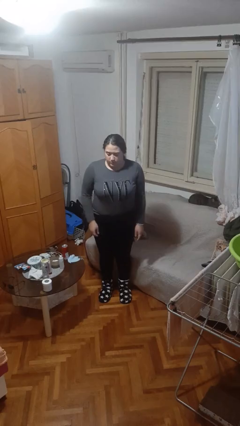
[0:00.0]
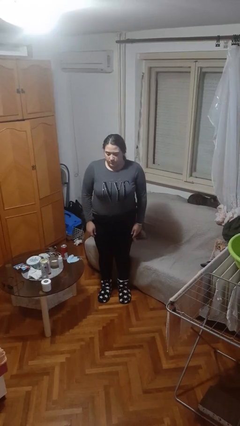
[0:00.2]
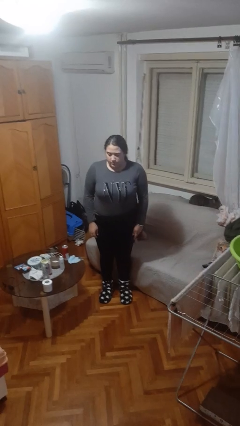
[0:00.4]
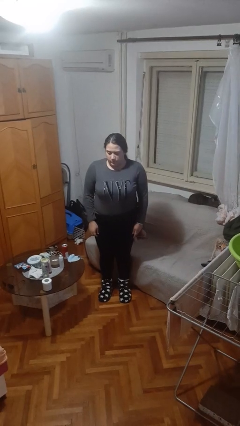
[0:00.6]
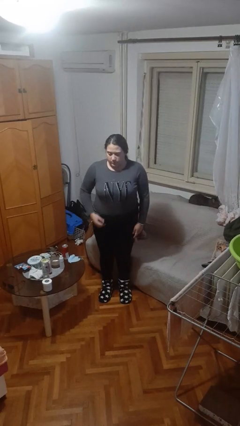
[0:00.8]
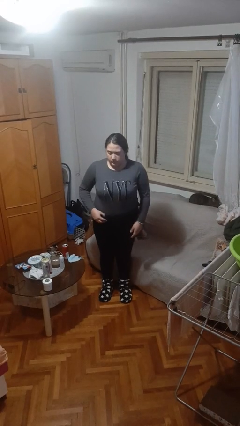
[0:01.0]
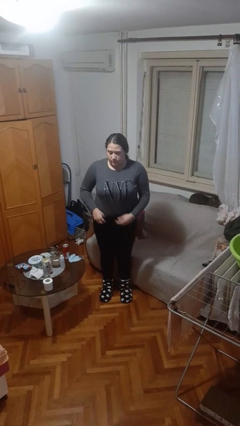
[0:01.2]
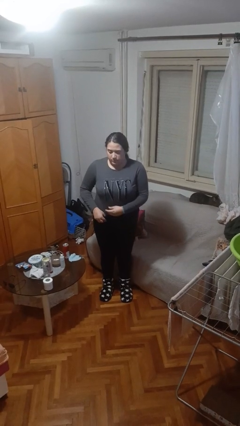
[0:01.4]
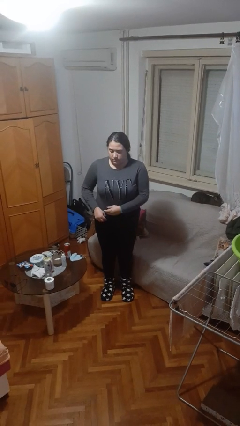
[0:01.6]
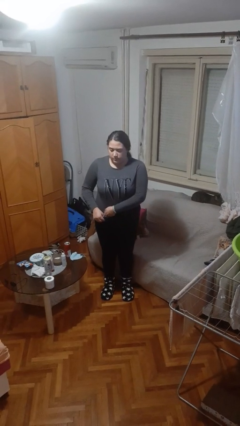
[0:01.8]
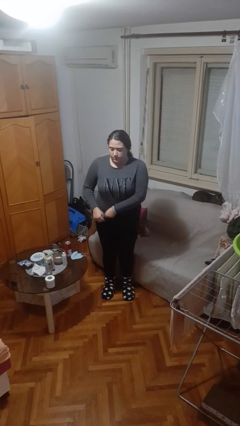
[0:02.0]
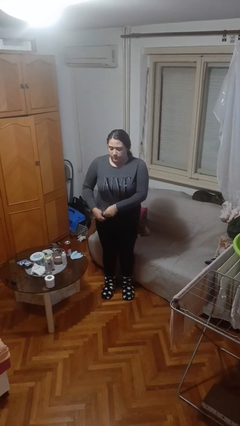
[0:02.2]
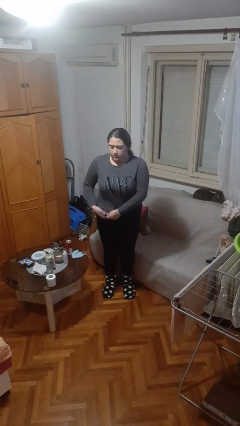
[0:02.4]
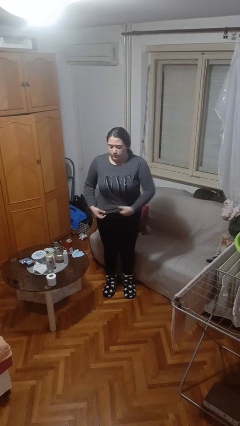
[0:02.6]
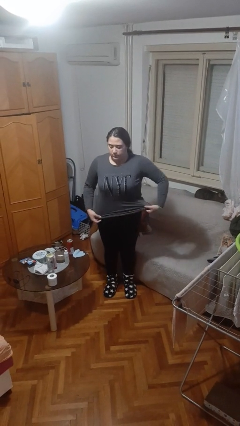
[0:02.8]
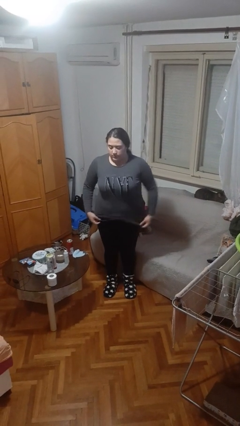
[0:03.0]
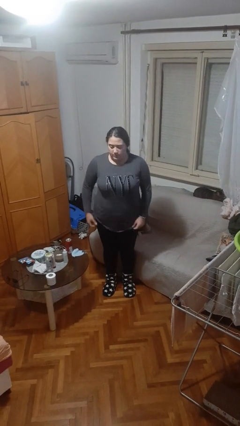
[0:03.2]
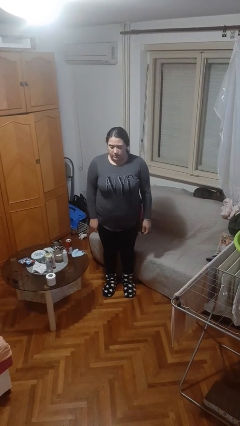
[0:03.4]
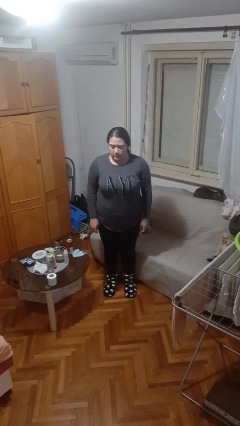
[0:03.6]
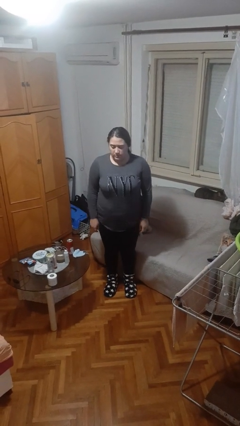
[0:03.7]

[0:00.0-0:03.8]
person untucks shirt

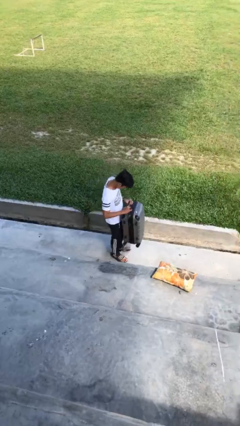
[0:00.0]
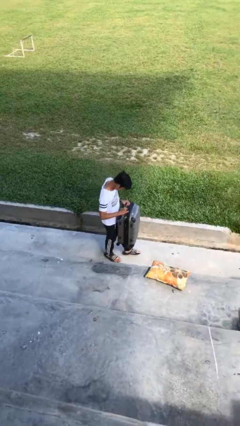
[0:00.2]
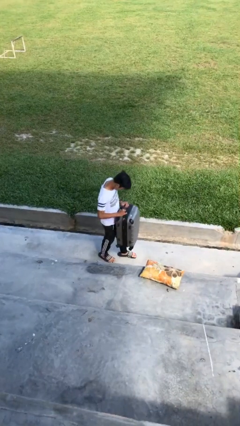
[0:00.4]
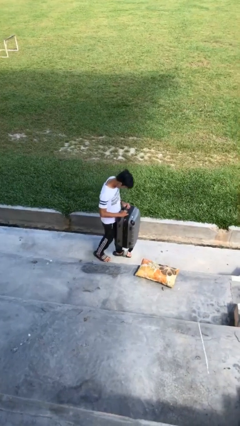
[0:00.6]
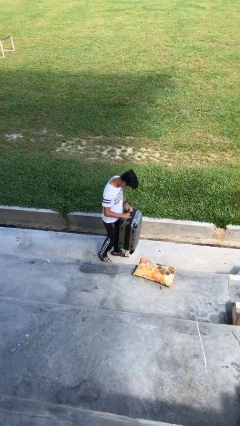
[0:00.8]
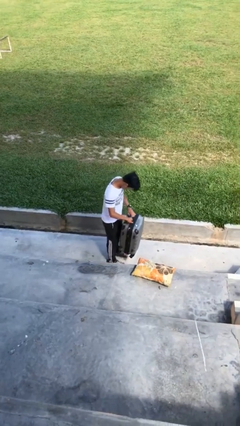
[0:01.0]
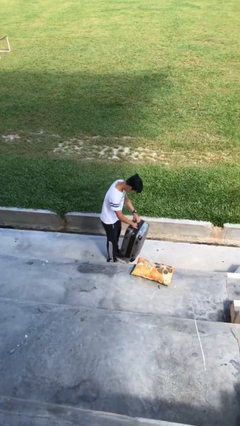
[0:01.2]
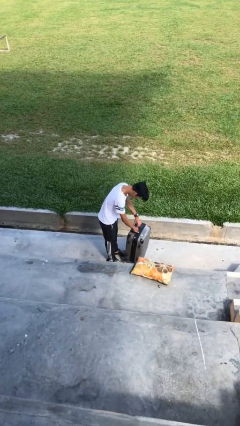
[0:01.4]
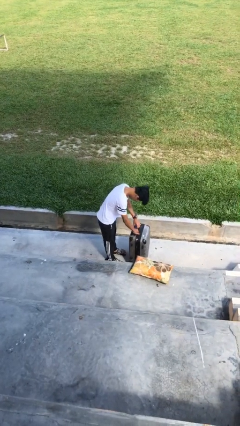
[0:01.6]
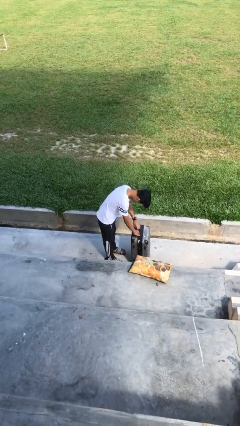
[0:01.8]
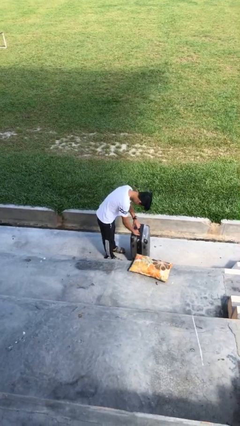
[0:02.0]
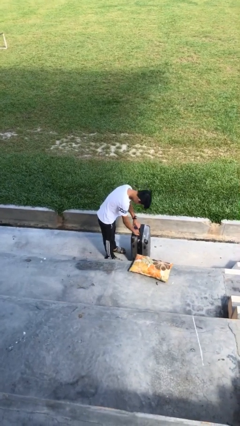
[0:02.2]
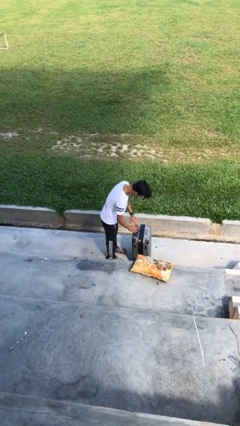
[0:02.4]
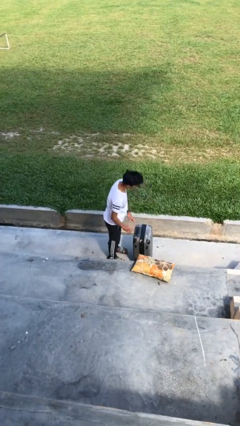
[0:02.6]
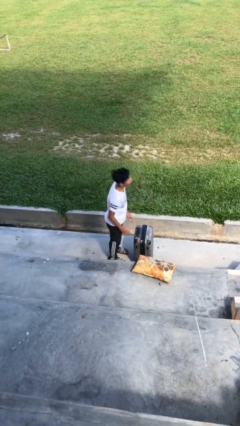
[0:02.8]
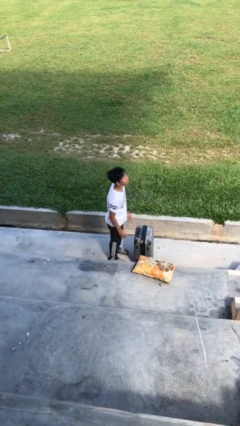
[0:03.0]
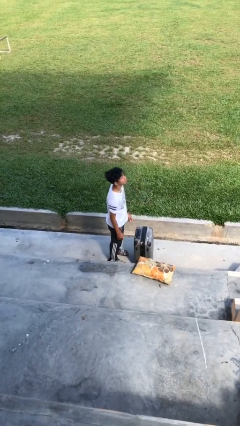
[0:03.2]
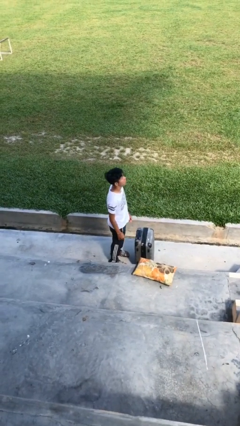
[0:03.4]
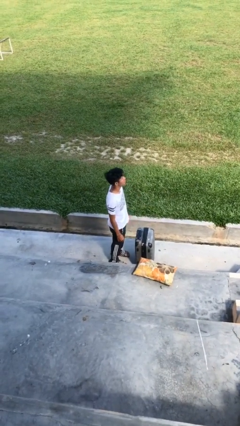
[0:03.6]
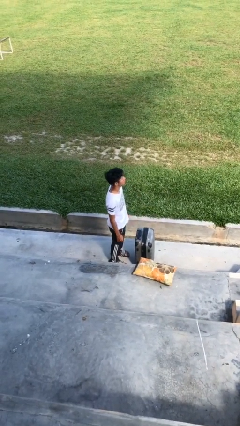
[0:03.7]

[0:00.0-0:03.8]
person puts down object on floor

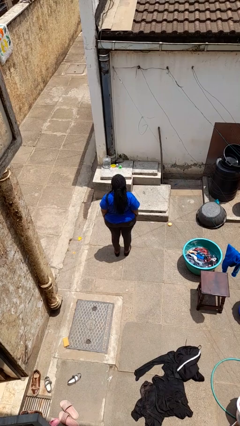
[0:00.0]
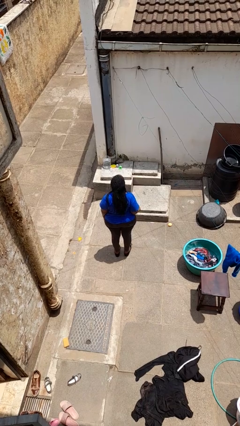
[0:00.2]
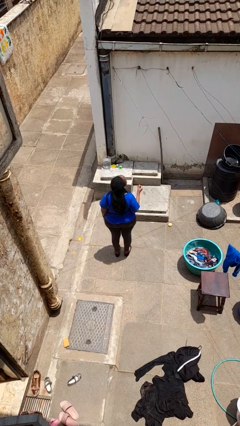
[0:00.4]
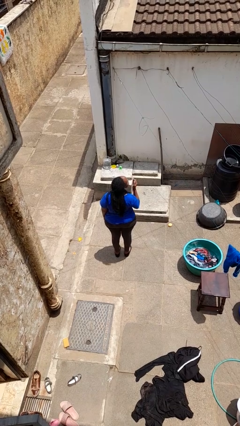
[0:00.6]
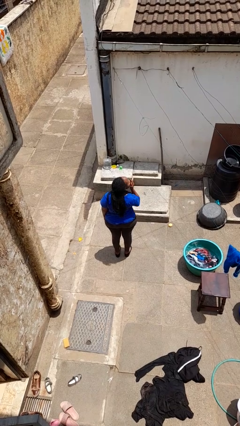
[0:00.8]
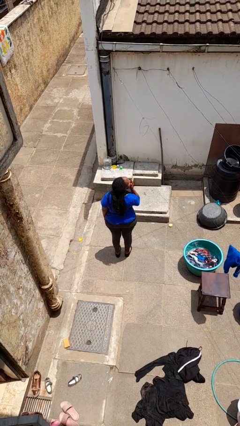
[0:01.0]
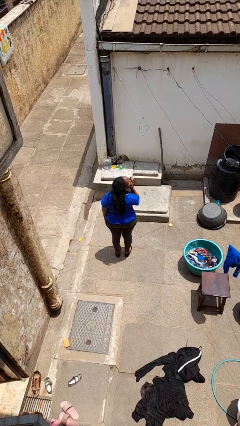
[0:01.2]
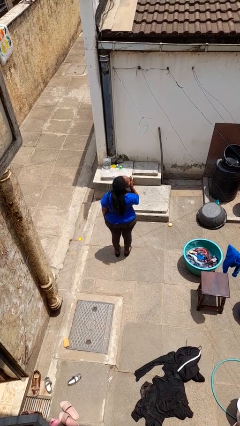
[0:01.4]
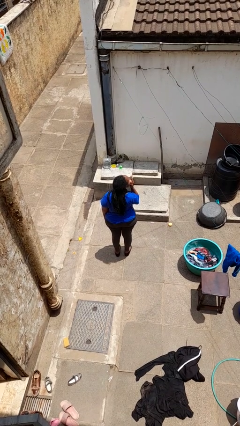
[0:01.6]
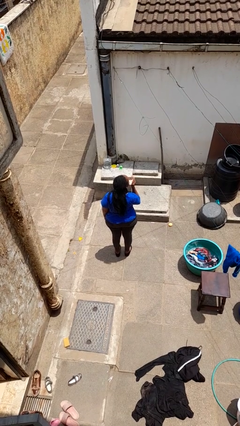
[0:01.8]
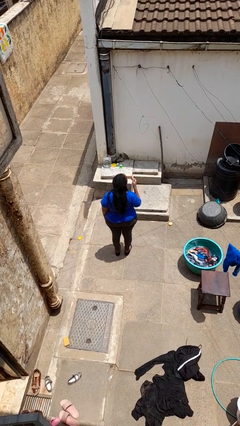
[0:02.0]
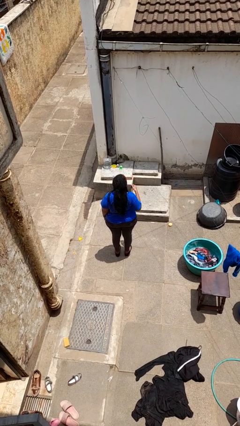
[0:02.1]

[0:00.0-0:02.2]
person yawns

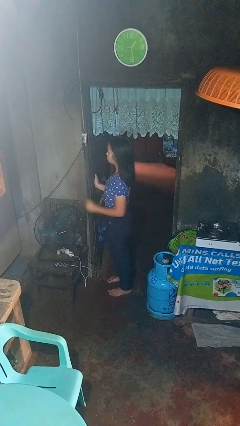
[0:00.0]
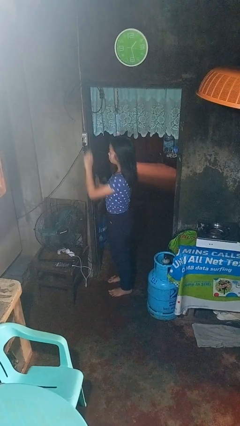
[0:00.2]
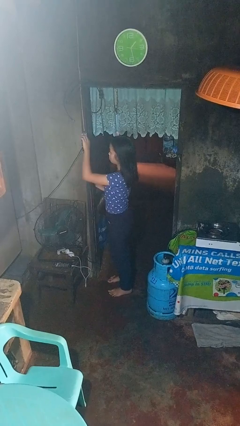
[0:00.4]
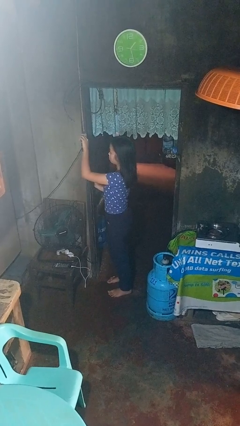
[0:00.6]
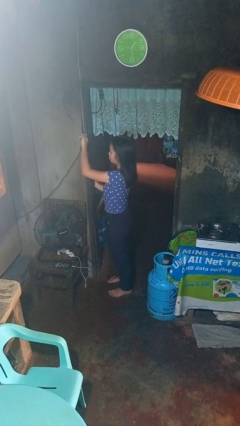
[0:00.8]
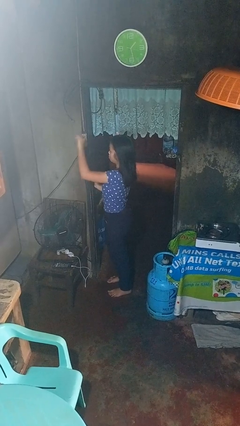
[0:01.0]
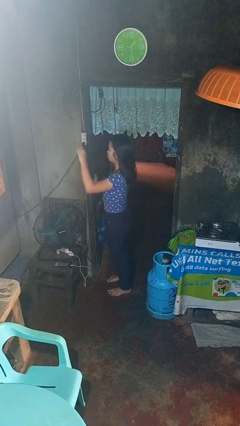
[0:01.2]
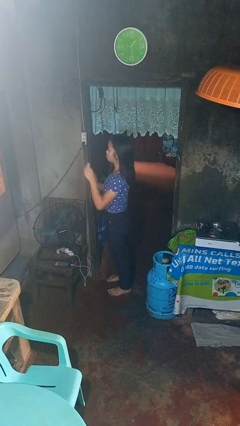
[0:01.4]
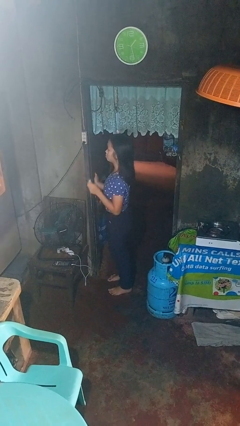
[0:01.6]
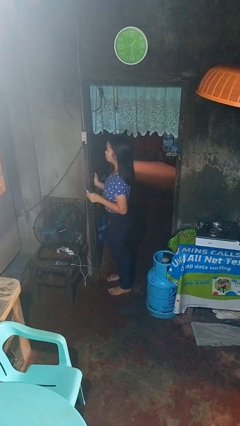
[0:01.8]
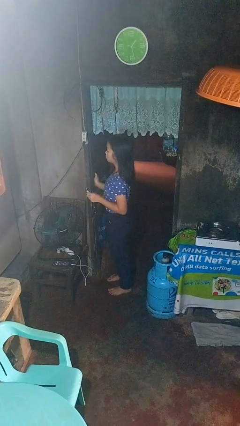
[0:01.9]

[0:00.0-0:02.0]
person unplugs from electrical socket

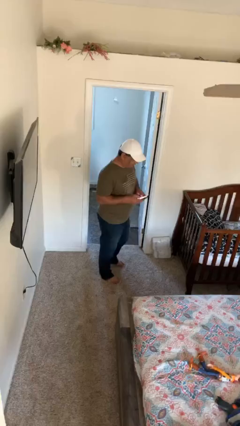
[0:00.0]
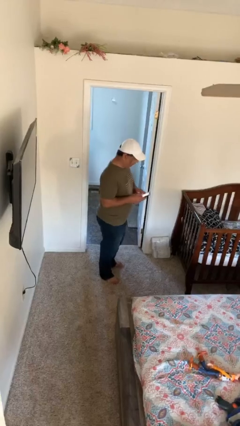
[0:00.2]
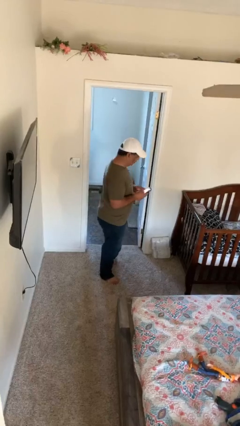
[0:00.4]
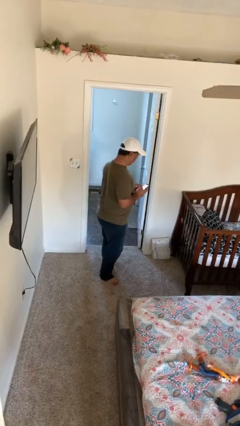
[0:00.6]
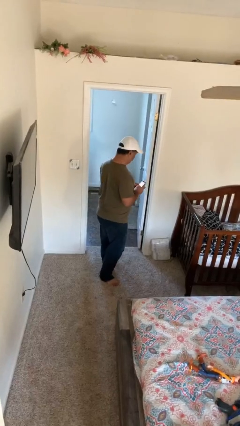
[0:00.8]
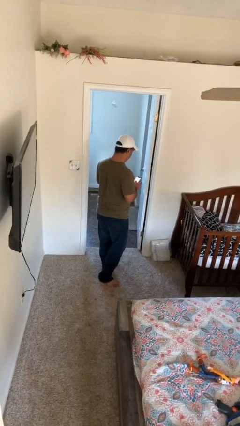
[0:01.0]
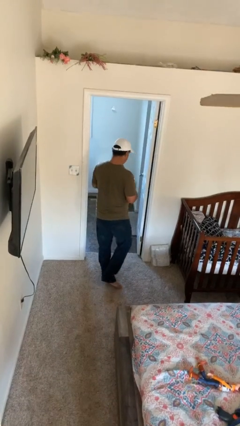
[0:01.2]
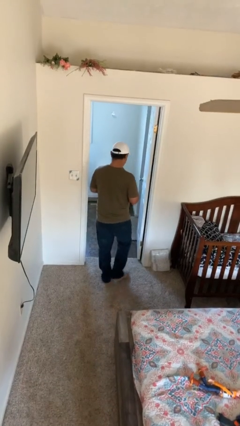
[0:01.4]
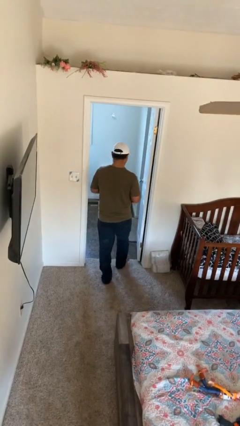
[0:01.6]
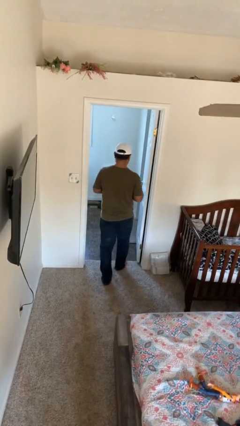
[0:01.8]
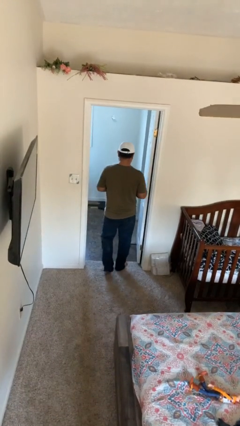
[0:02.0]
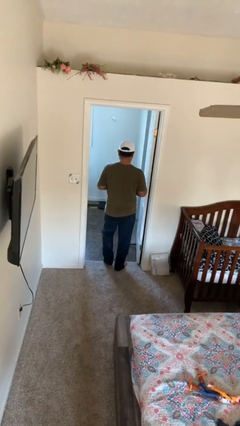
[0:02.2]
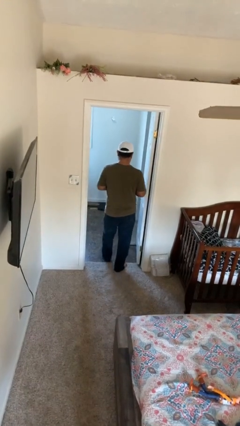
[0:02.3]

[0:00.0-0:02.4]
person exits scene through structure

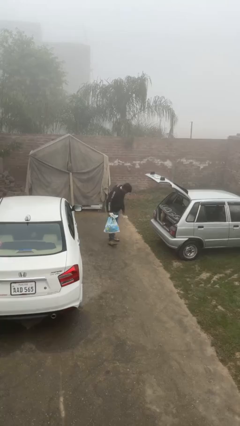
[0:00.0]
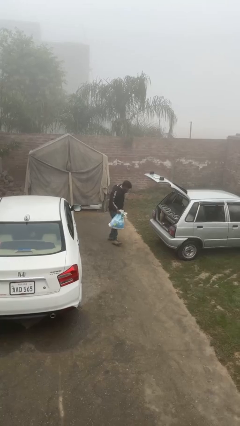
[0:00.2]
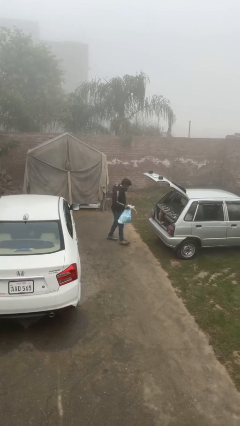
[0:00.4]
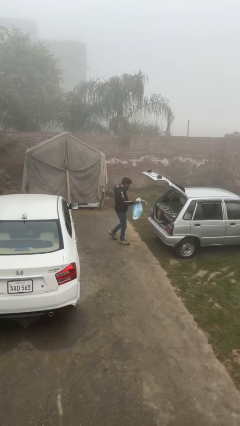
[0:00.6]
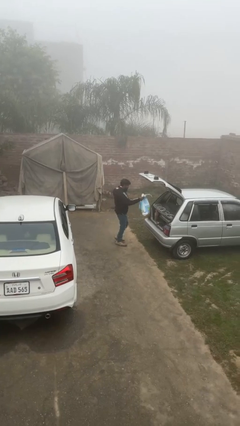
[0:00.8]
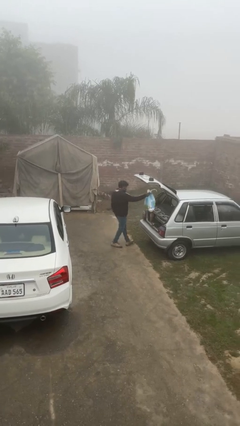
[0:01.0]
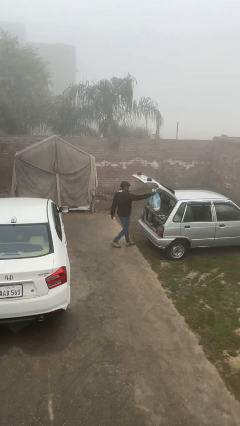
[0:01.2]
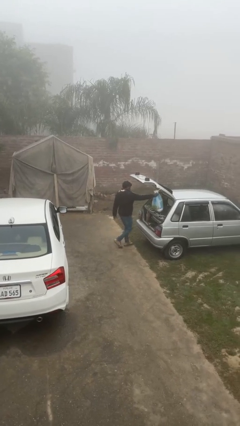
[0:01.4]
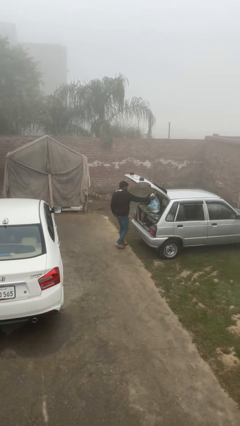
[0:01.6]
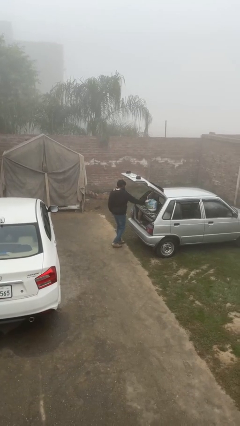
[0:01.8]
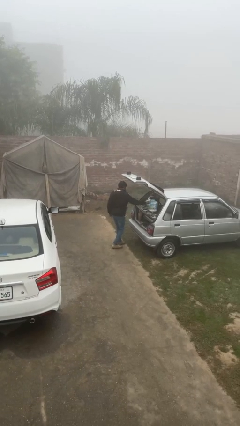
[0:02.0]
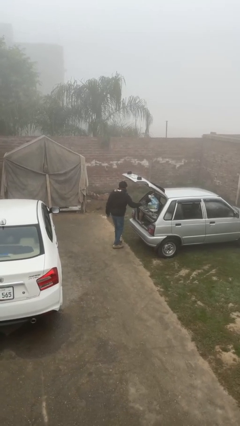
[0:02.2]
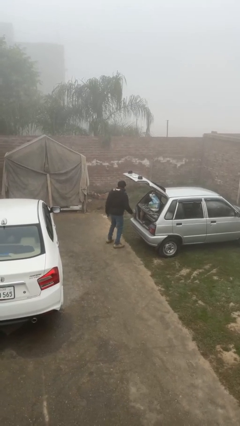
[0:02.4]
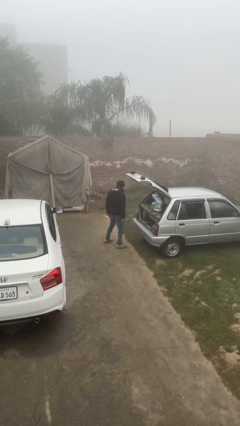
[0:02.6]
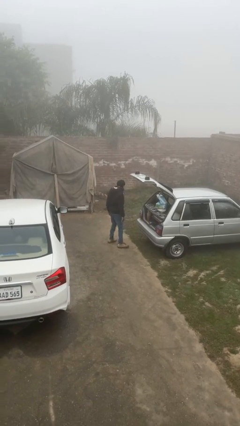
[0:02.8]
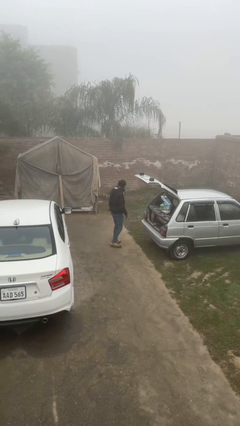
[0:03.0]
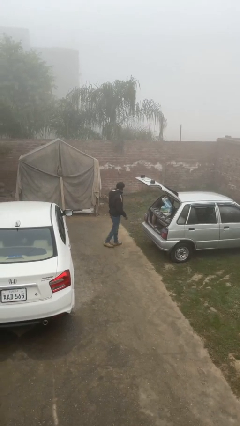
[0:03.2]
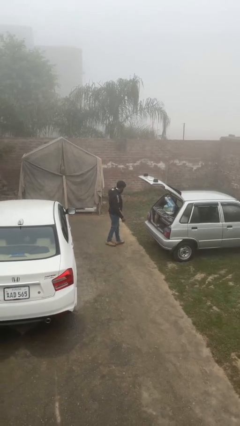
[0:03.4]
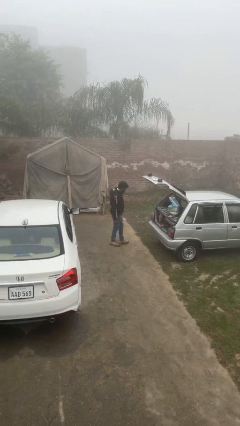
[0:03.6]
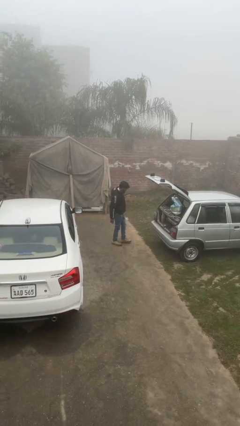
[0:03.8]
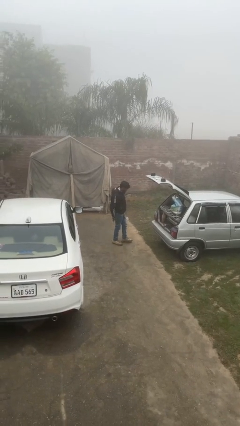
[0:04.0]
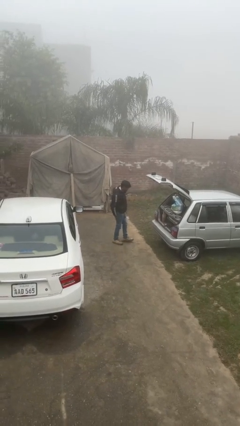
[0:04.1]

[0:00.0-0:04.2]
person loads car
